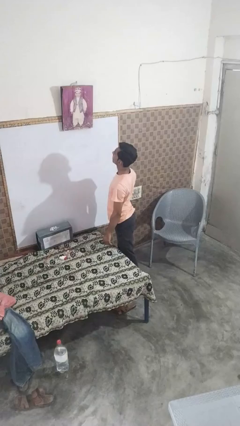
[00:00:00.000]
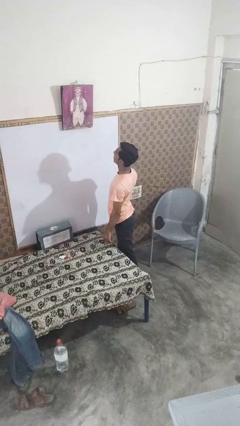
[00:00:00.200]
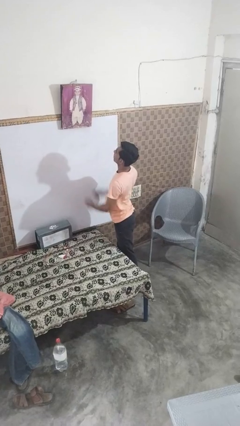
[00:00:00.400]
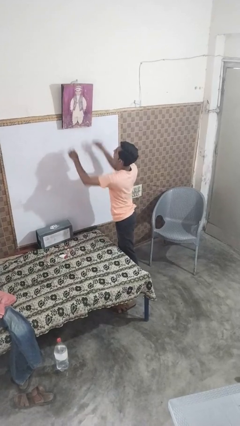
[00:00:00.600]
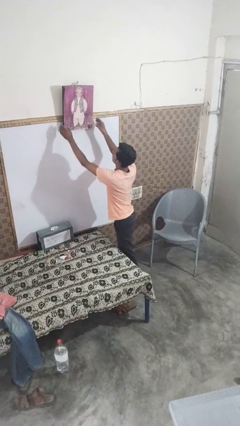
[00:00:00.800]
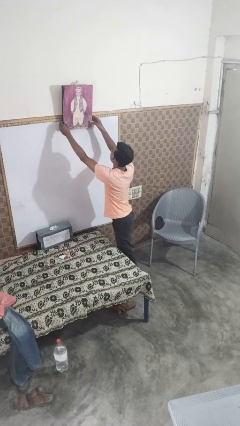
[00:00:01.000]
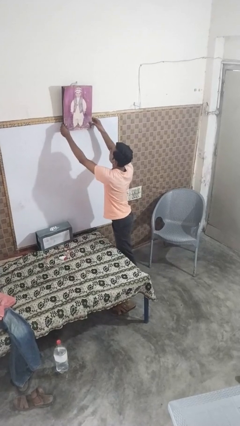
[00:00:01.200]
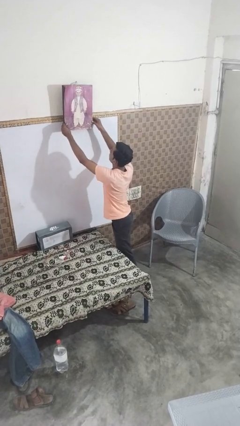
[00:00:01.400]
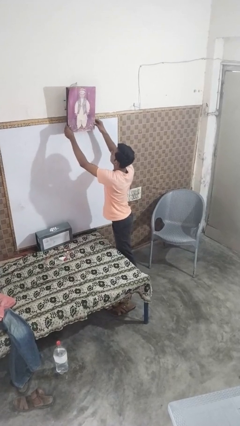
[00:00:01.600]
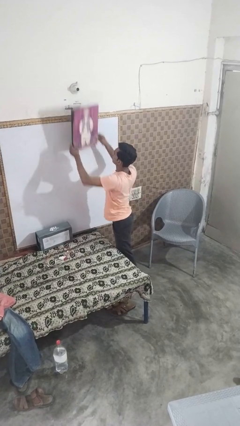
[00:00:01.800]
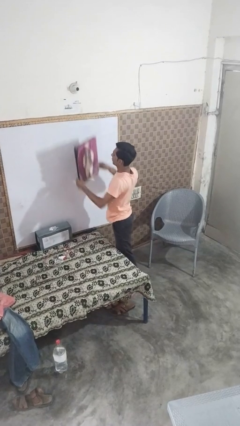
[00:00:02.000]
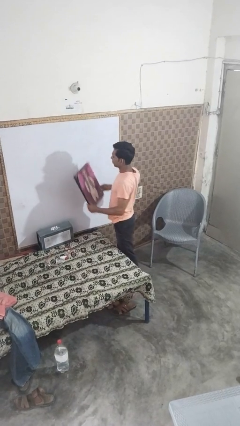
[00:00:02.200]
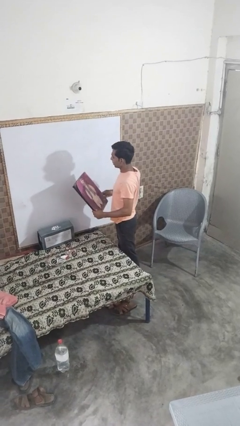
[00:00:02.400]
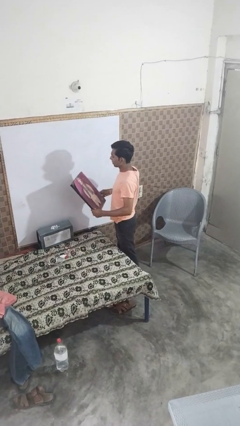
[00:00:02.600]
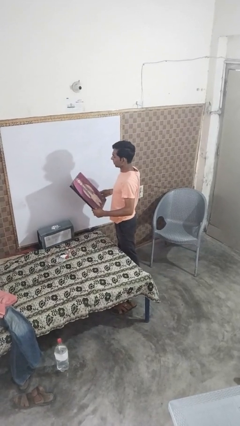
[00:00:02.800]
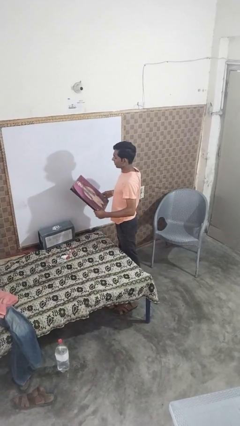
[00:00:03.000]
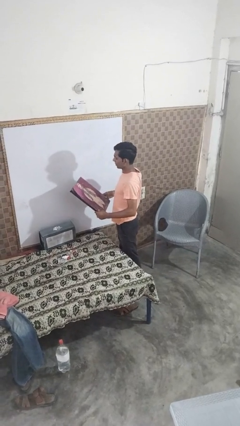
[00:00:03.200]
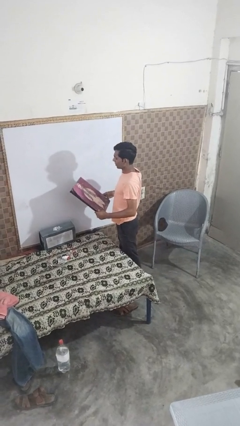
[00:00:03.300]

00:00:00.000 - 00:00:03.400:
person takes down picture frame

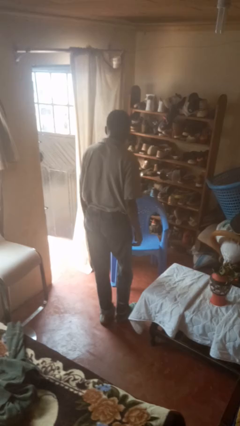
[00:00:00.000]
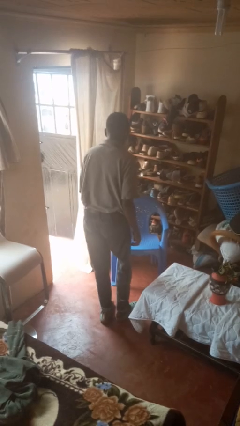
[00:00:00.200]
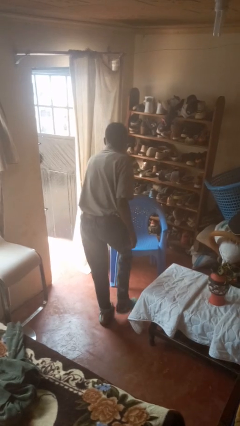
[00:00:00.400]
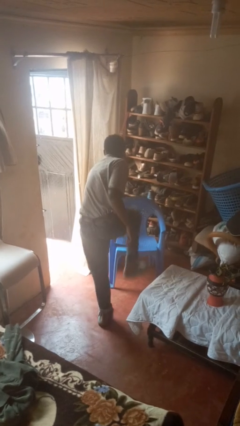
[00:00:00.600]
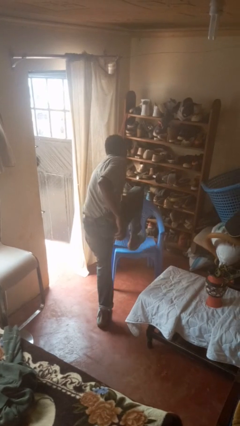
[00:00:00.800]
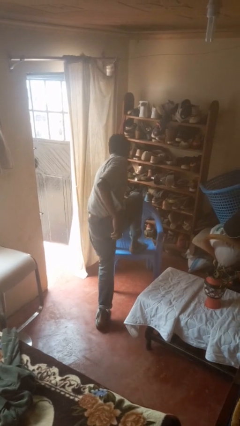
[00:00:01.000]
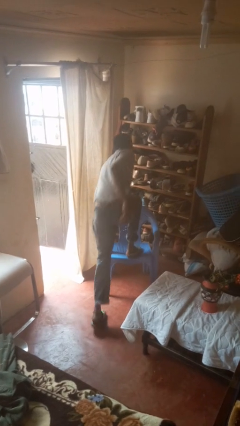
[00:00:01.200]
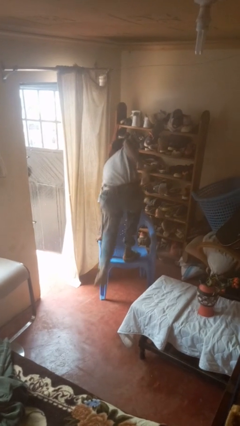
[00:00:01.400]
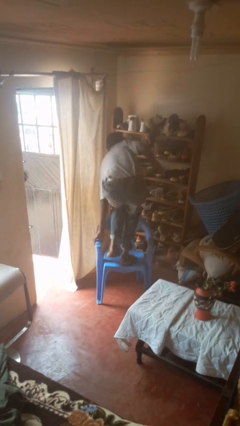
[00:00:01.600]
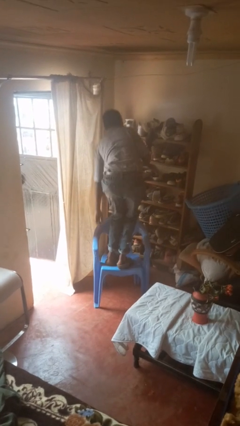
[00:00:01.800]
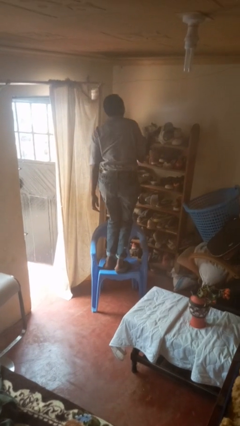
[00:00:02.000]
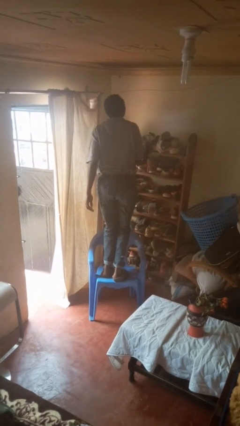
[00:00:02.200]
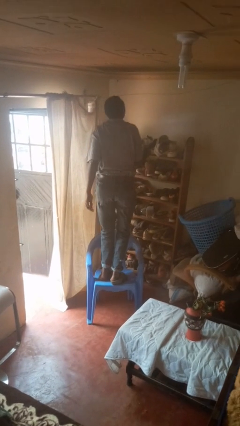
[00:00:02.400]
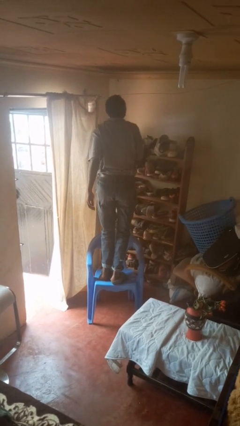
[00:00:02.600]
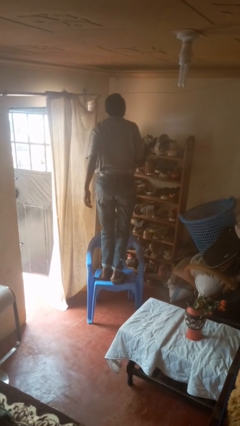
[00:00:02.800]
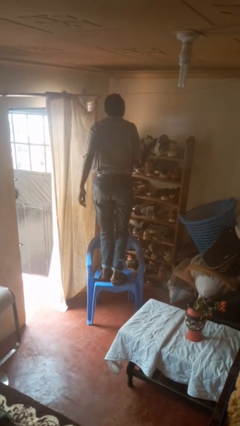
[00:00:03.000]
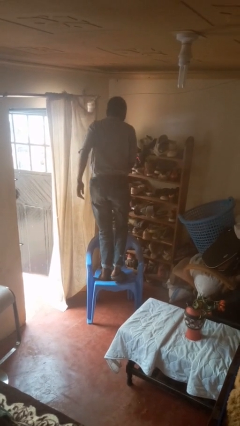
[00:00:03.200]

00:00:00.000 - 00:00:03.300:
person climbs on chair

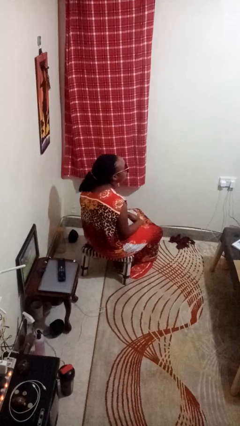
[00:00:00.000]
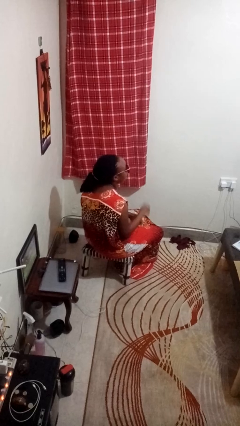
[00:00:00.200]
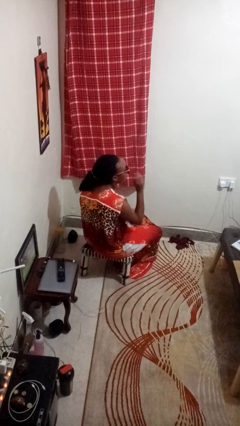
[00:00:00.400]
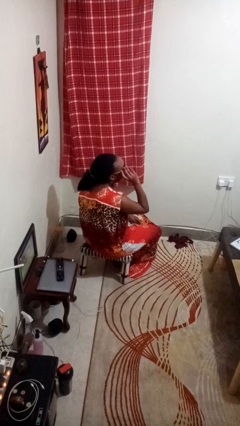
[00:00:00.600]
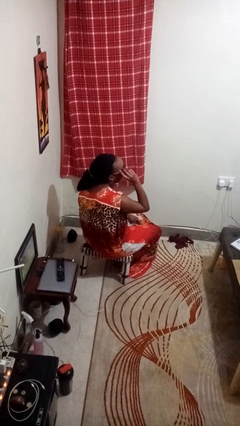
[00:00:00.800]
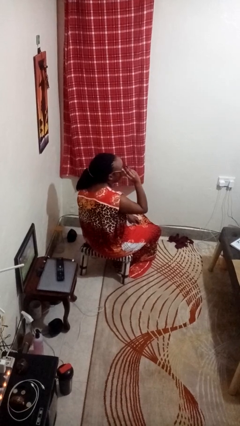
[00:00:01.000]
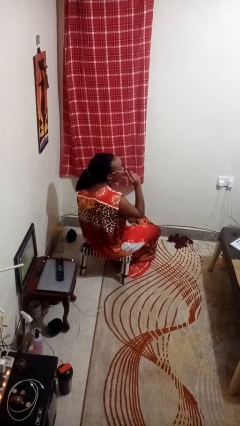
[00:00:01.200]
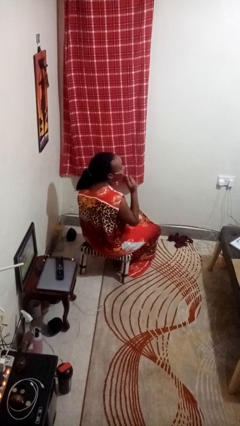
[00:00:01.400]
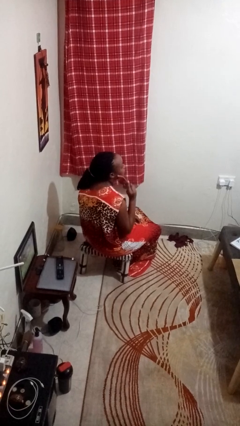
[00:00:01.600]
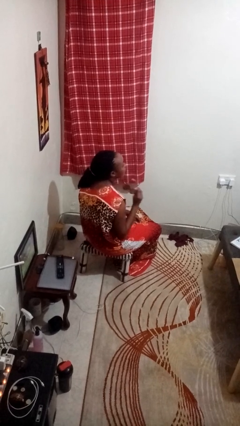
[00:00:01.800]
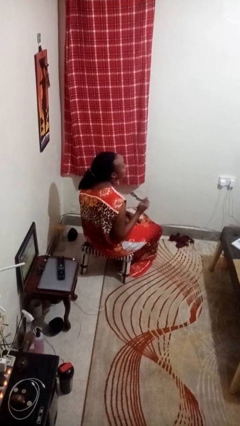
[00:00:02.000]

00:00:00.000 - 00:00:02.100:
person takes off sunglasses

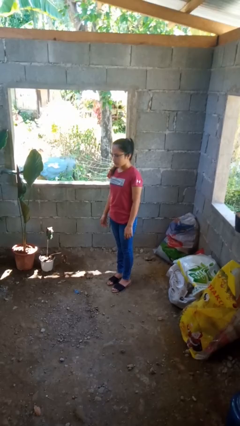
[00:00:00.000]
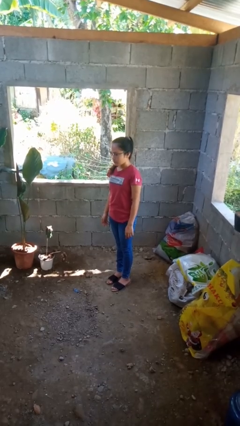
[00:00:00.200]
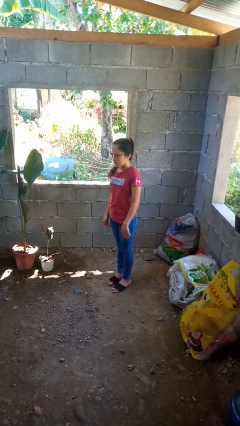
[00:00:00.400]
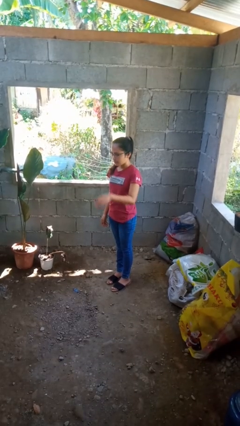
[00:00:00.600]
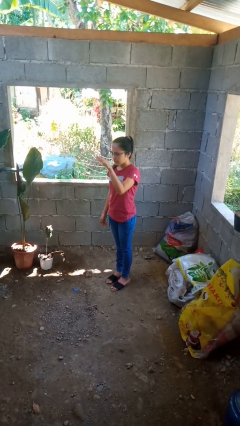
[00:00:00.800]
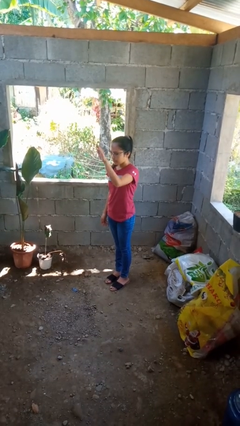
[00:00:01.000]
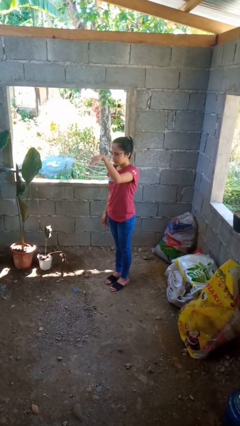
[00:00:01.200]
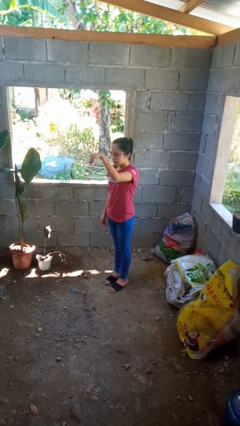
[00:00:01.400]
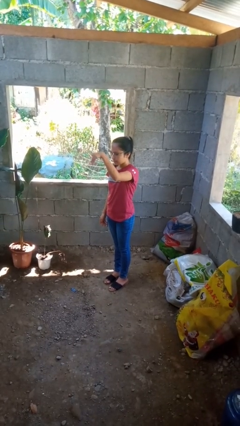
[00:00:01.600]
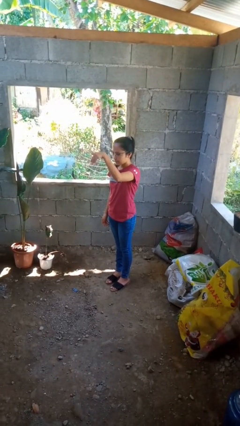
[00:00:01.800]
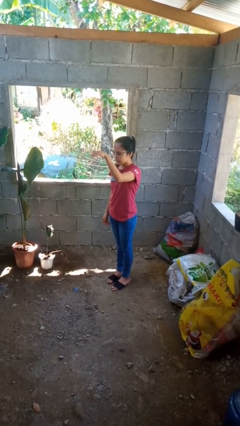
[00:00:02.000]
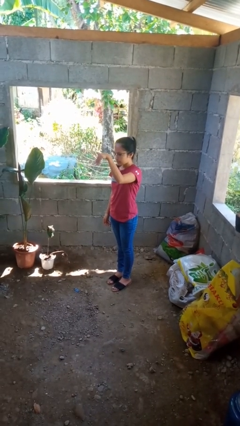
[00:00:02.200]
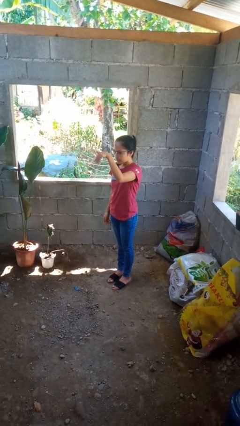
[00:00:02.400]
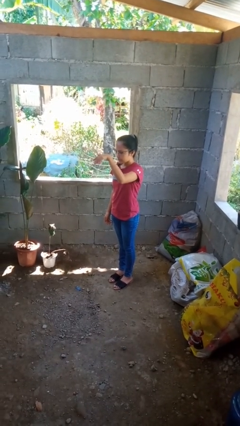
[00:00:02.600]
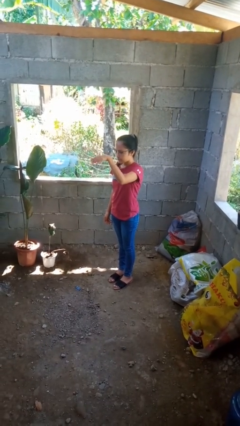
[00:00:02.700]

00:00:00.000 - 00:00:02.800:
person gestures come here

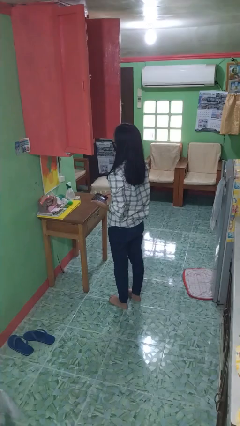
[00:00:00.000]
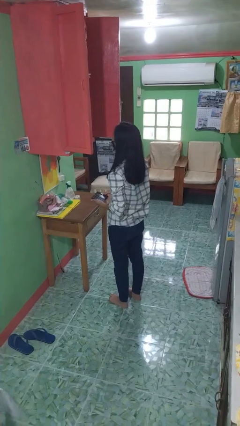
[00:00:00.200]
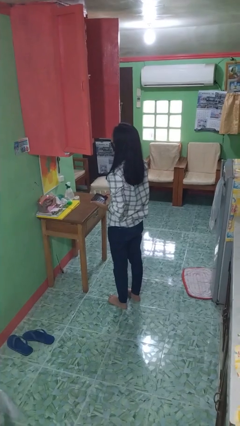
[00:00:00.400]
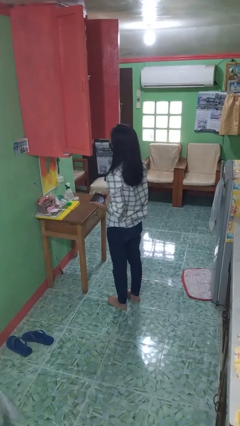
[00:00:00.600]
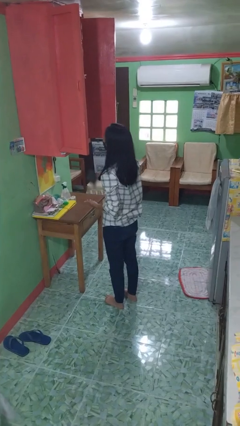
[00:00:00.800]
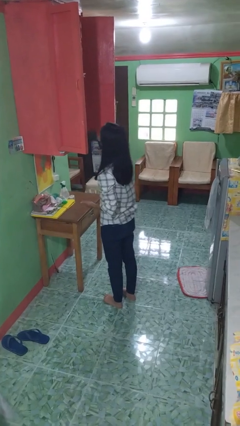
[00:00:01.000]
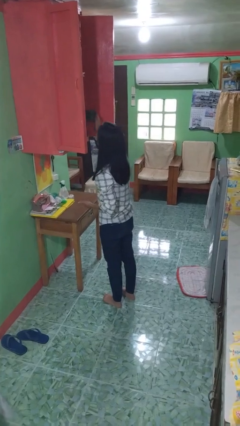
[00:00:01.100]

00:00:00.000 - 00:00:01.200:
person puts down object into cabinet

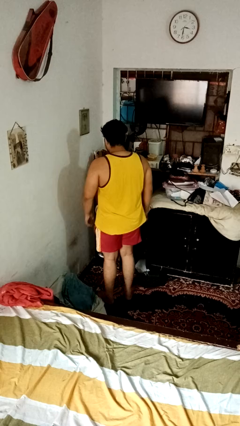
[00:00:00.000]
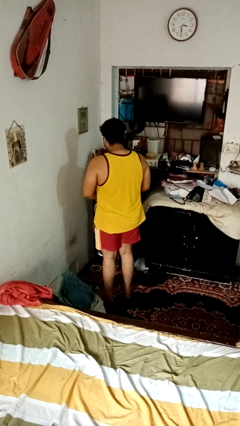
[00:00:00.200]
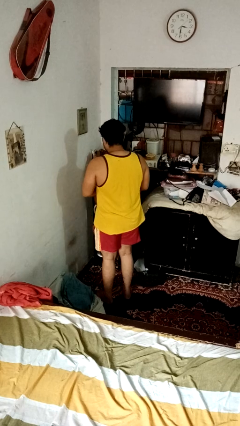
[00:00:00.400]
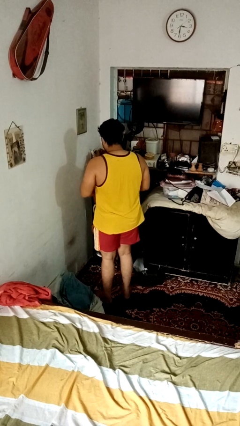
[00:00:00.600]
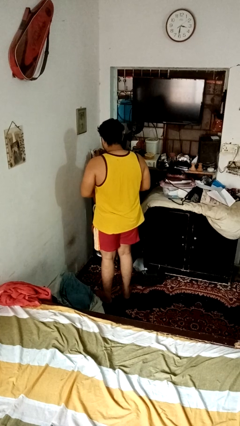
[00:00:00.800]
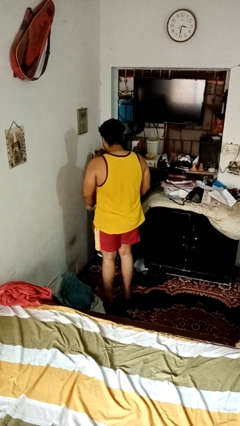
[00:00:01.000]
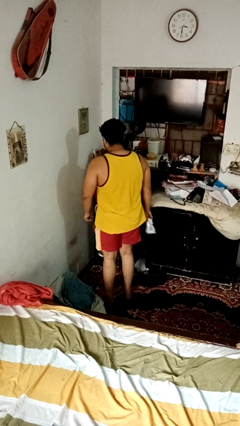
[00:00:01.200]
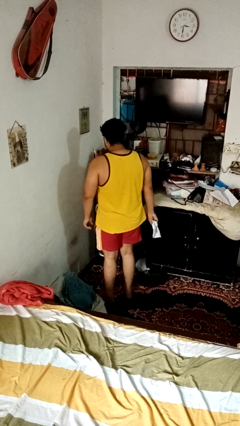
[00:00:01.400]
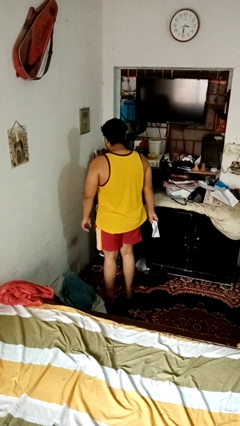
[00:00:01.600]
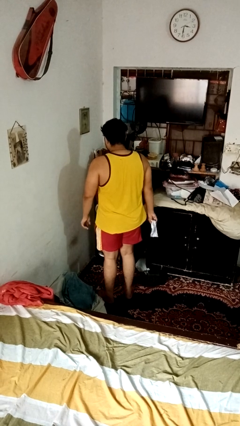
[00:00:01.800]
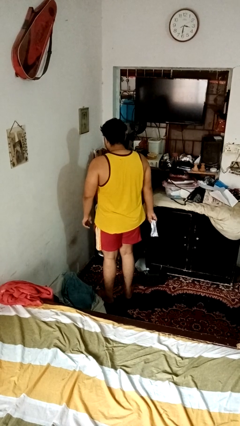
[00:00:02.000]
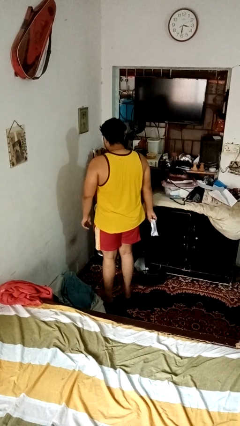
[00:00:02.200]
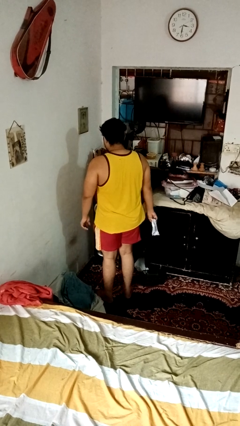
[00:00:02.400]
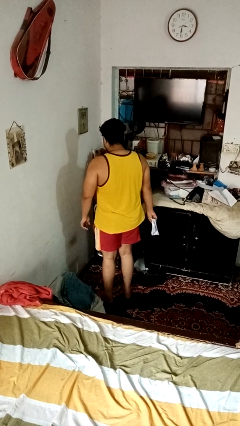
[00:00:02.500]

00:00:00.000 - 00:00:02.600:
person crumples paper

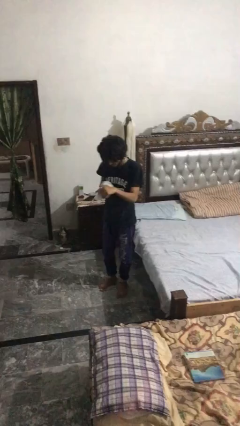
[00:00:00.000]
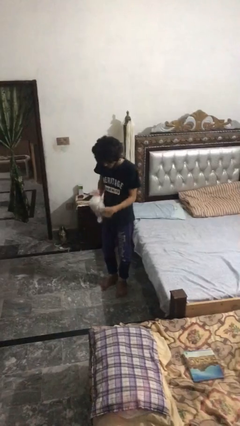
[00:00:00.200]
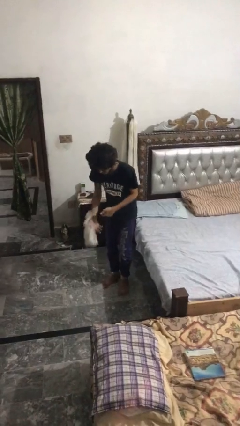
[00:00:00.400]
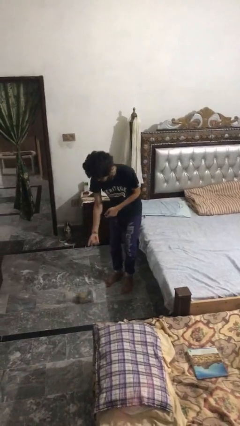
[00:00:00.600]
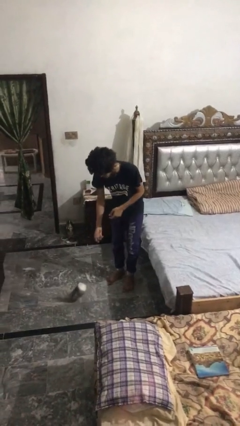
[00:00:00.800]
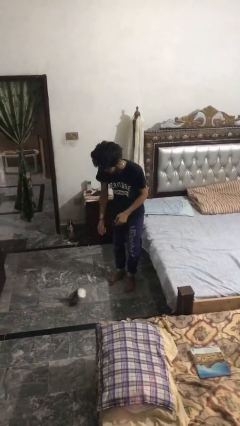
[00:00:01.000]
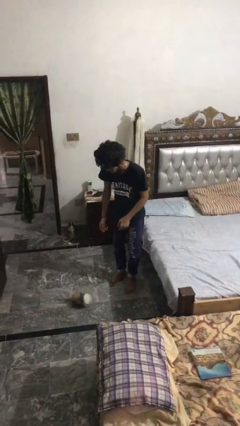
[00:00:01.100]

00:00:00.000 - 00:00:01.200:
person drops object

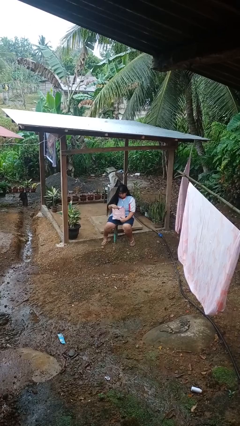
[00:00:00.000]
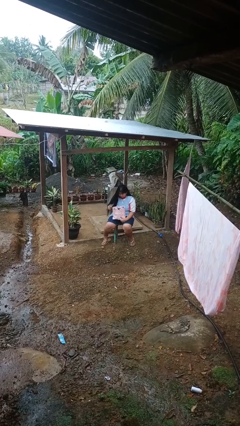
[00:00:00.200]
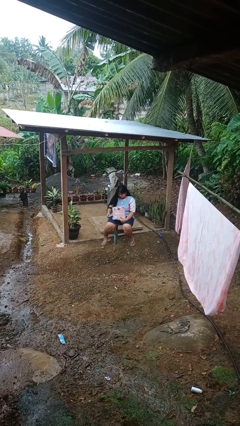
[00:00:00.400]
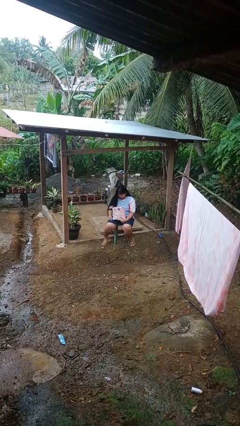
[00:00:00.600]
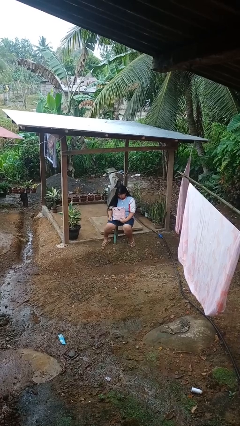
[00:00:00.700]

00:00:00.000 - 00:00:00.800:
person puts object into bag
